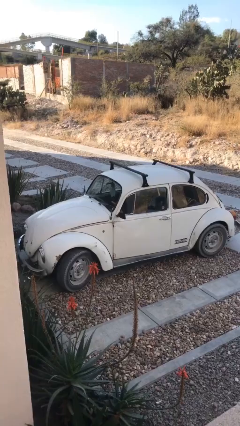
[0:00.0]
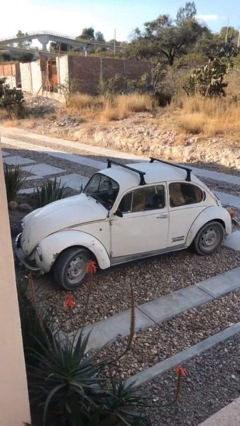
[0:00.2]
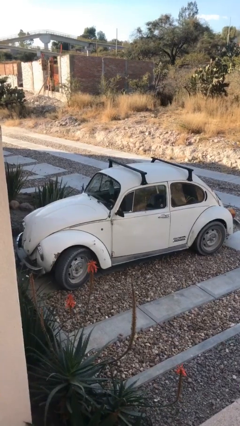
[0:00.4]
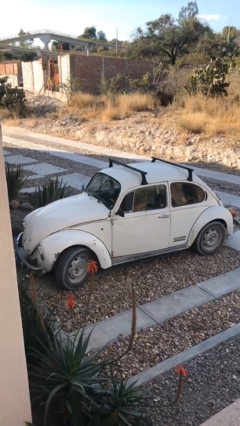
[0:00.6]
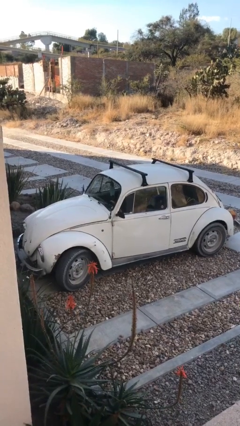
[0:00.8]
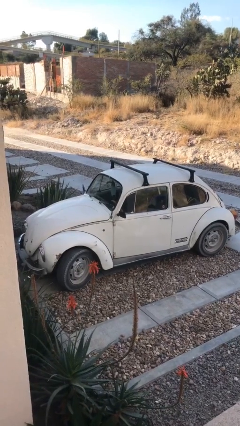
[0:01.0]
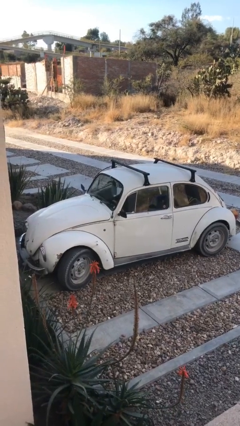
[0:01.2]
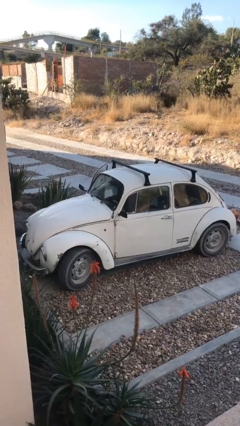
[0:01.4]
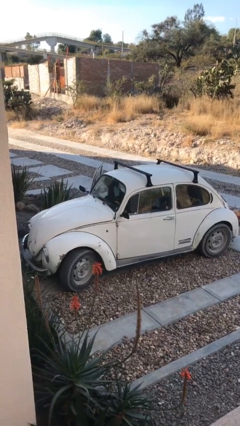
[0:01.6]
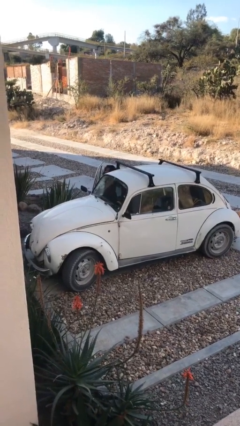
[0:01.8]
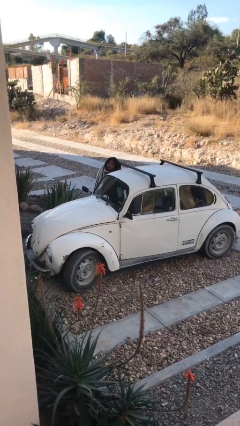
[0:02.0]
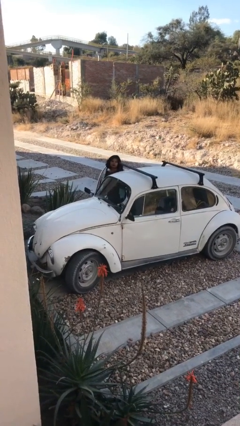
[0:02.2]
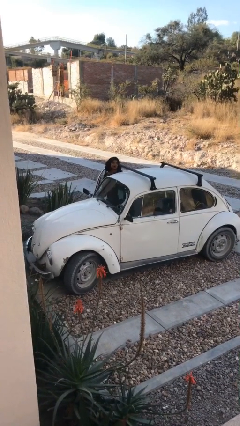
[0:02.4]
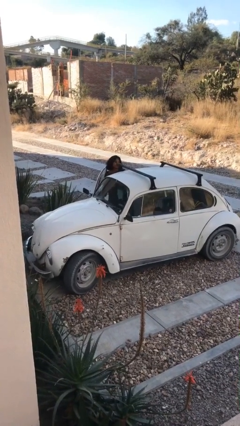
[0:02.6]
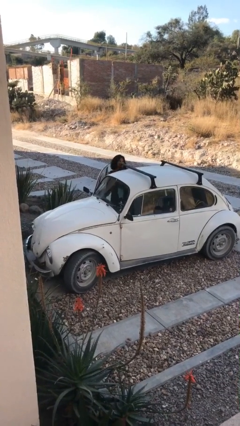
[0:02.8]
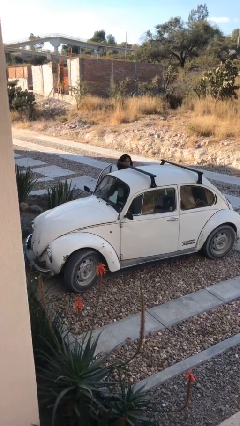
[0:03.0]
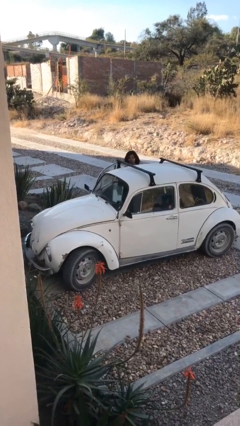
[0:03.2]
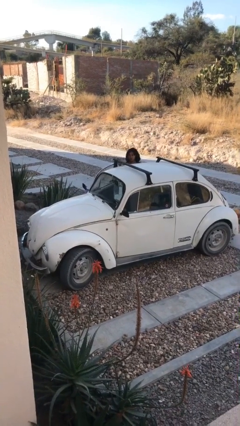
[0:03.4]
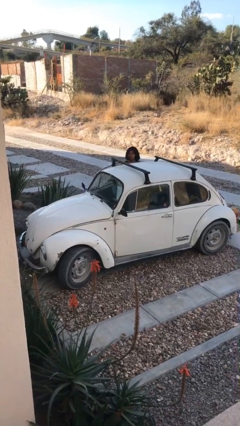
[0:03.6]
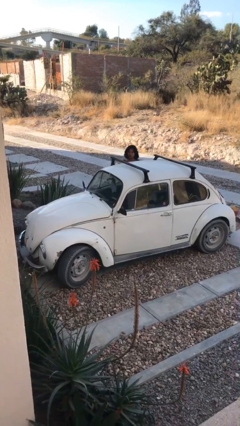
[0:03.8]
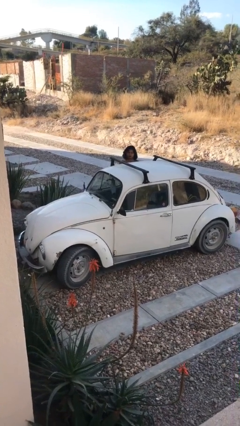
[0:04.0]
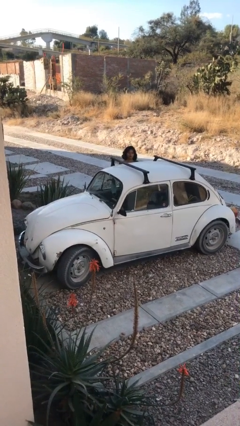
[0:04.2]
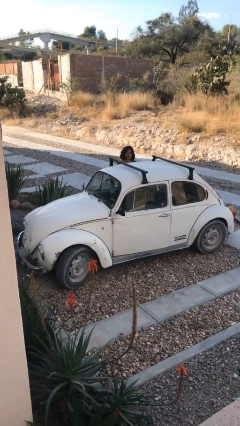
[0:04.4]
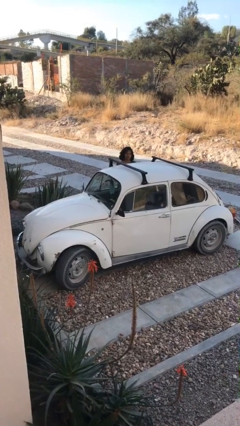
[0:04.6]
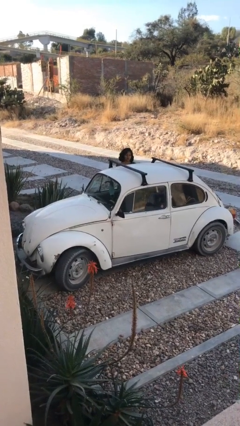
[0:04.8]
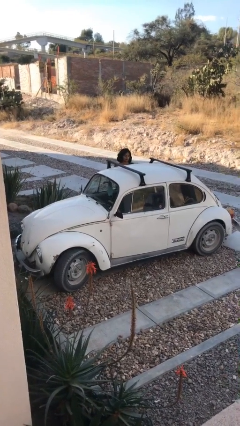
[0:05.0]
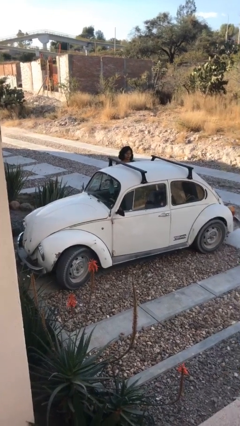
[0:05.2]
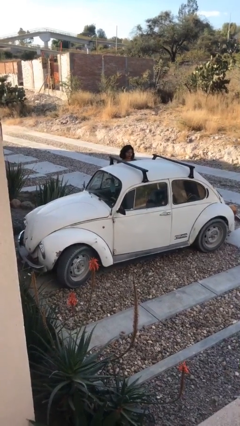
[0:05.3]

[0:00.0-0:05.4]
car drops off person

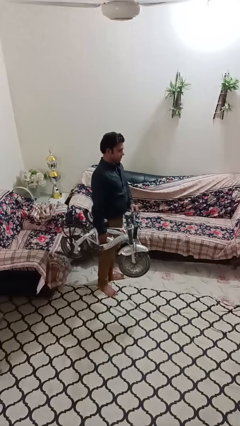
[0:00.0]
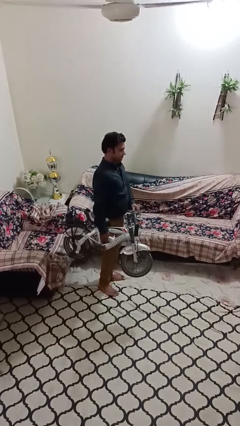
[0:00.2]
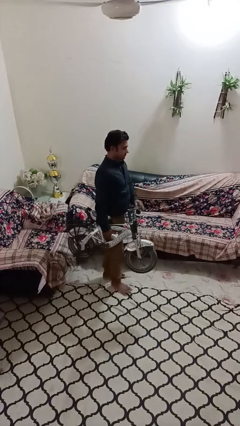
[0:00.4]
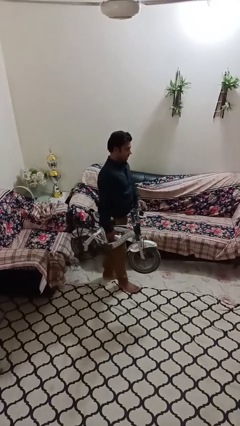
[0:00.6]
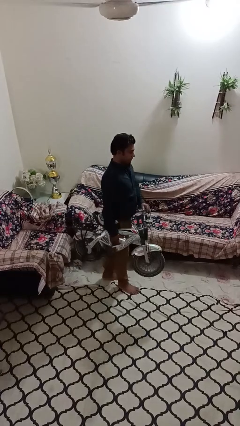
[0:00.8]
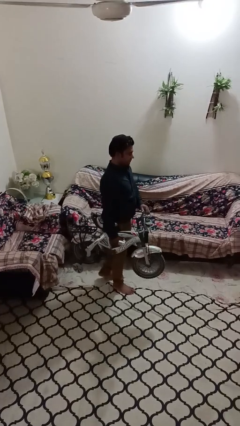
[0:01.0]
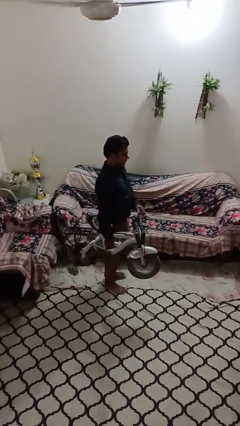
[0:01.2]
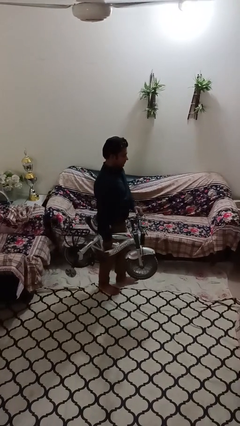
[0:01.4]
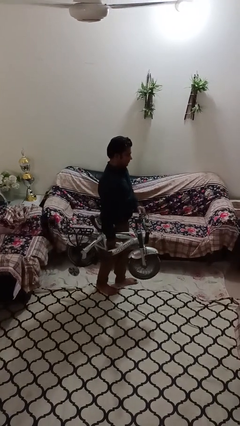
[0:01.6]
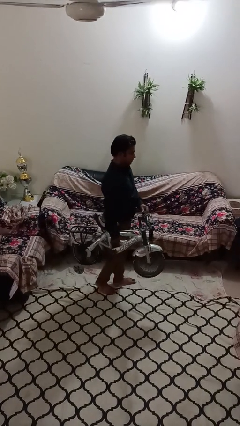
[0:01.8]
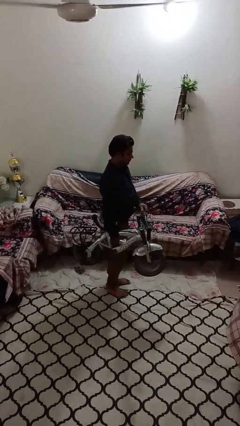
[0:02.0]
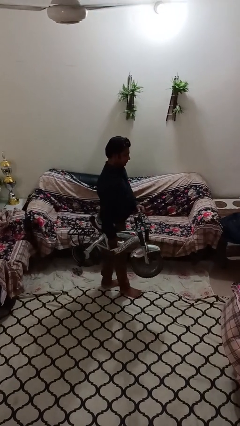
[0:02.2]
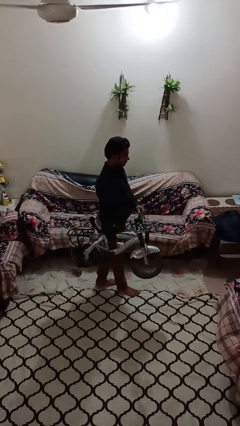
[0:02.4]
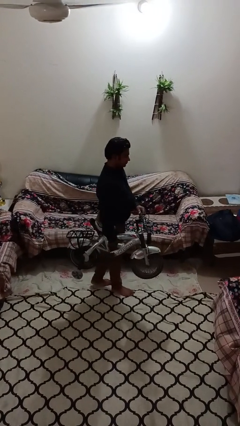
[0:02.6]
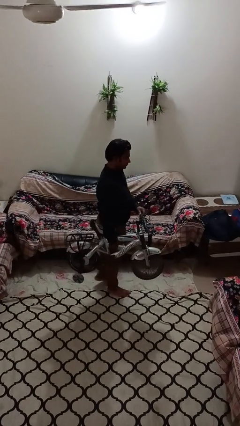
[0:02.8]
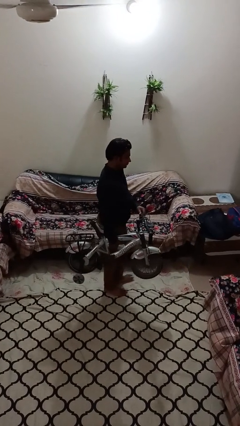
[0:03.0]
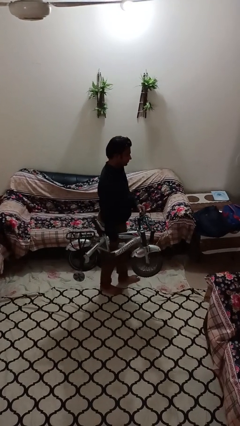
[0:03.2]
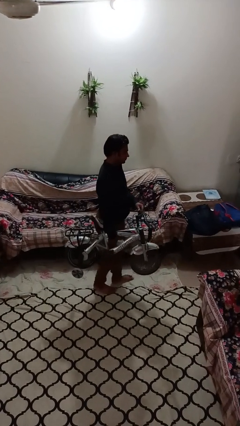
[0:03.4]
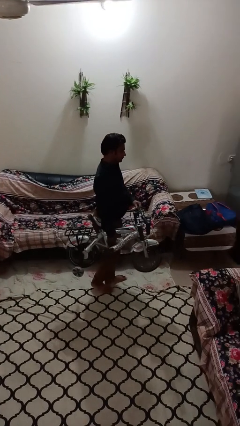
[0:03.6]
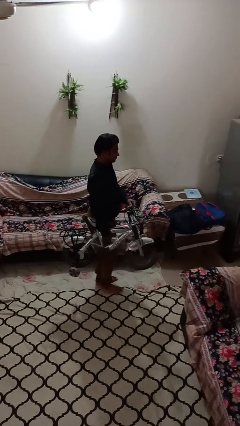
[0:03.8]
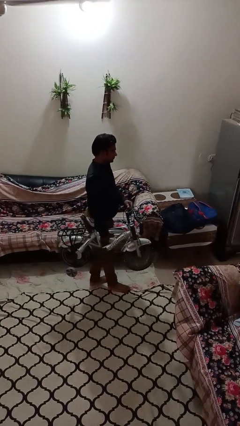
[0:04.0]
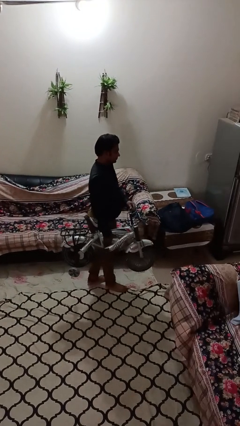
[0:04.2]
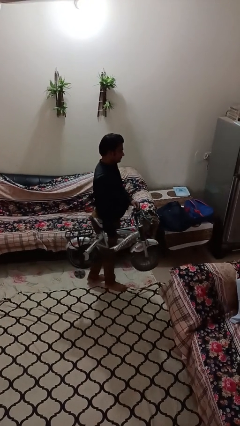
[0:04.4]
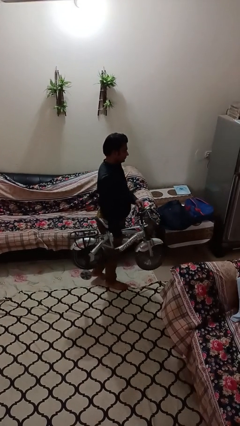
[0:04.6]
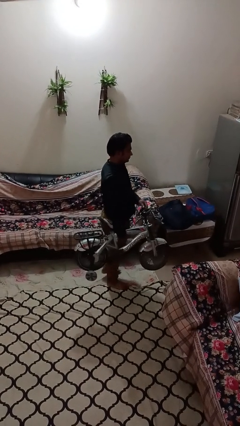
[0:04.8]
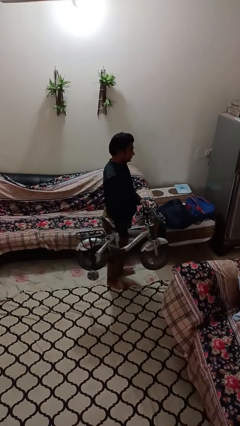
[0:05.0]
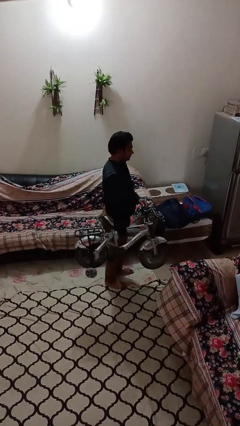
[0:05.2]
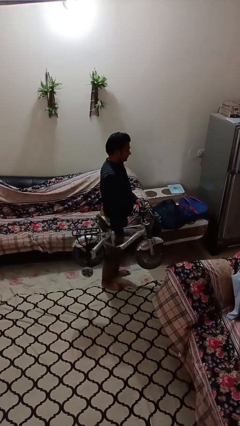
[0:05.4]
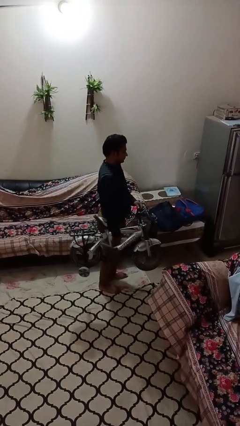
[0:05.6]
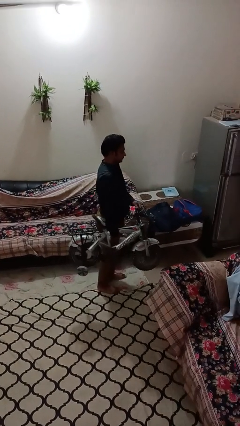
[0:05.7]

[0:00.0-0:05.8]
person carries bicycle

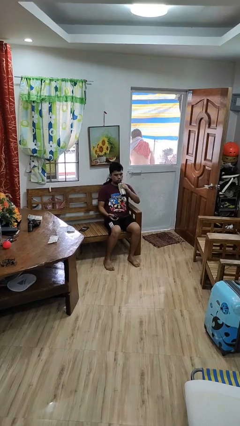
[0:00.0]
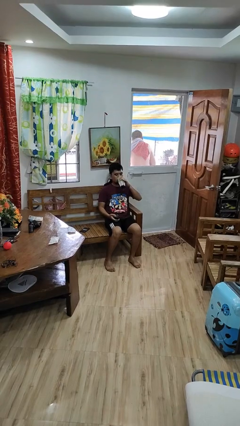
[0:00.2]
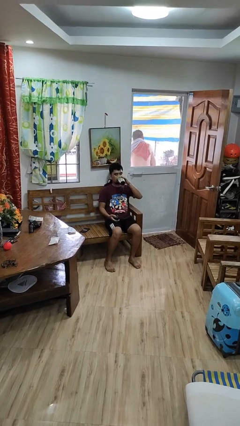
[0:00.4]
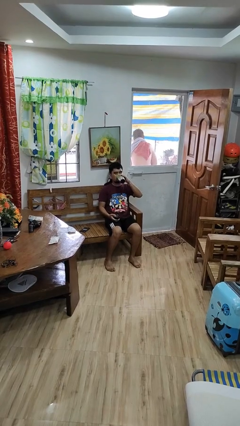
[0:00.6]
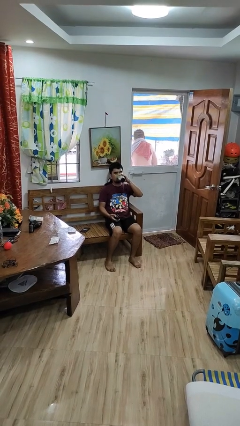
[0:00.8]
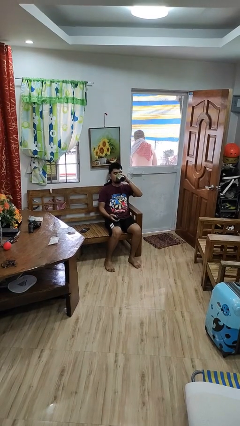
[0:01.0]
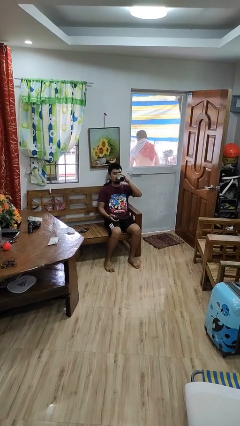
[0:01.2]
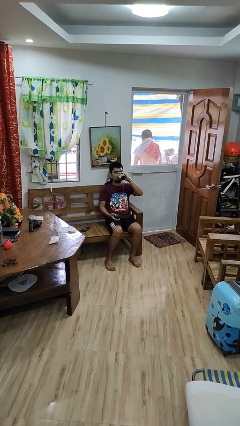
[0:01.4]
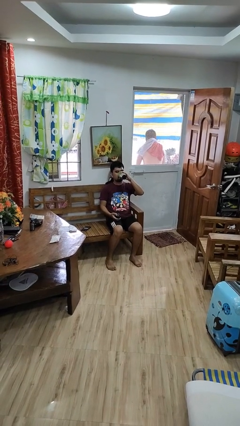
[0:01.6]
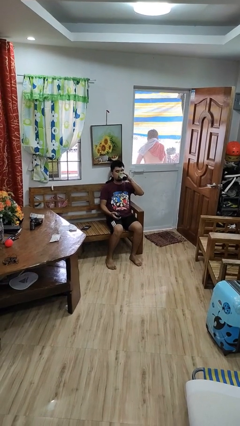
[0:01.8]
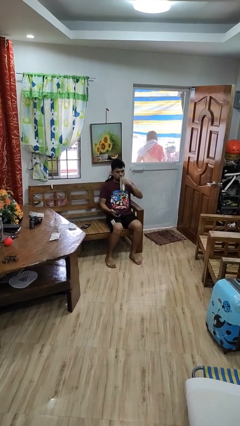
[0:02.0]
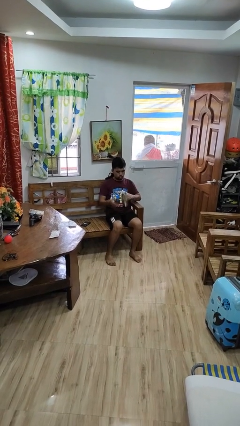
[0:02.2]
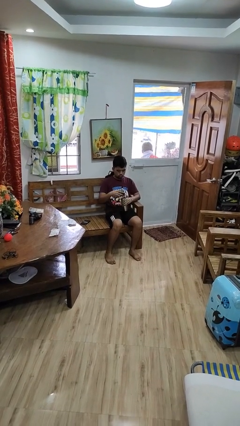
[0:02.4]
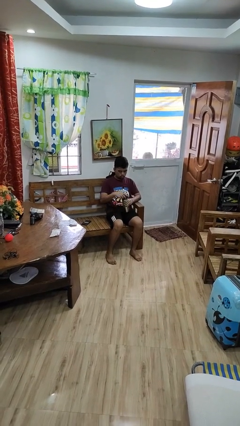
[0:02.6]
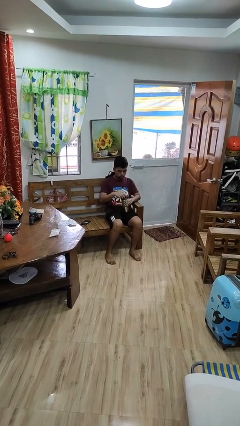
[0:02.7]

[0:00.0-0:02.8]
person drinks from bottle

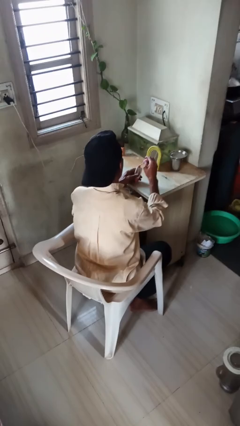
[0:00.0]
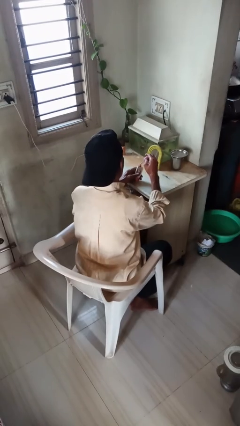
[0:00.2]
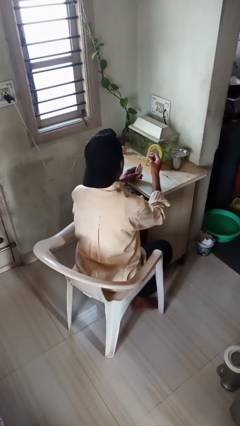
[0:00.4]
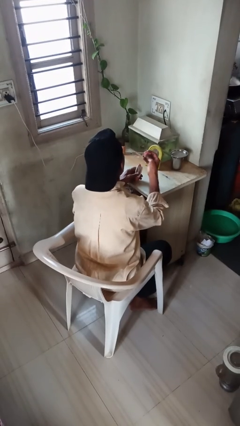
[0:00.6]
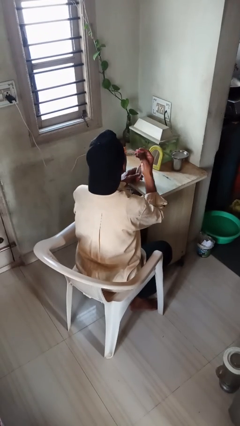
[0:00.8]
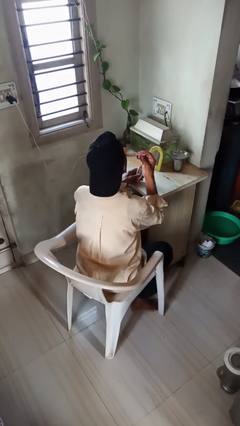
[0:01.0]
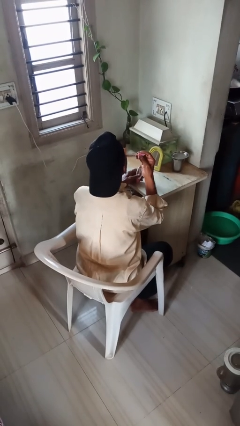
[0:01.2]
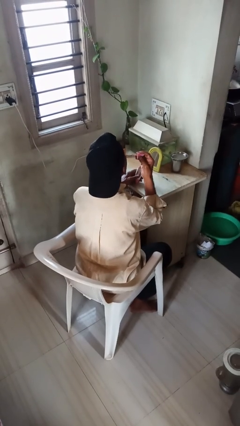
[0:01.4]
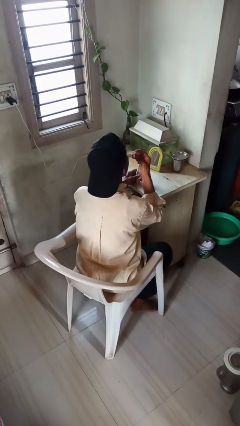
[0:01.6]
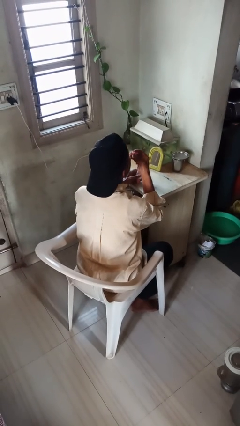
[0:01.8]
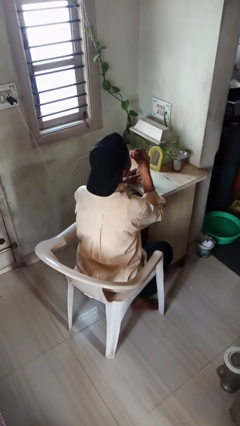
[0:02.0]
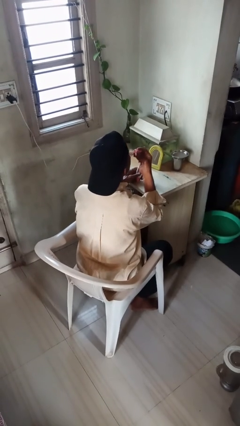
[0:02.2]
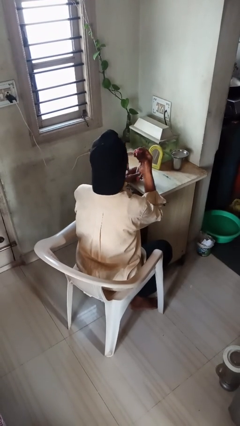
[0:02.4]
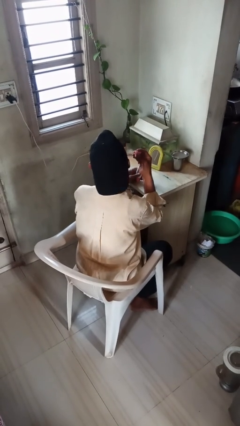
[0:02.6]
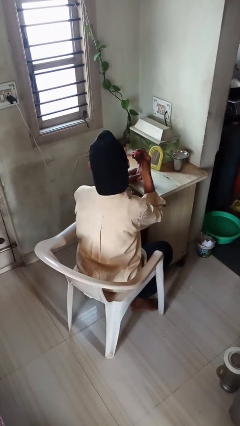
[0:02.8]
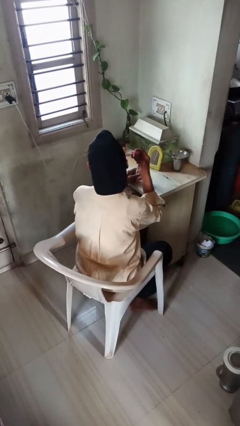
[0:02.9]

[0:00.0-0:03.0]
person applies lip makeup

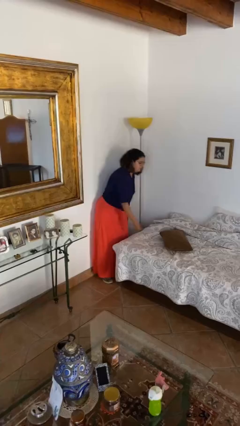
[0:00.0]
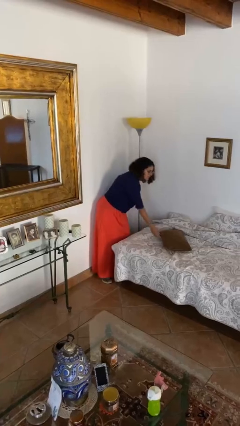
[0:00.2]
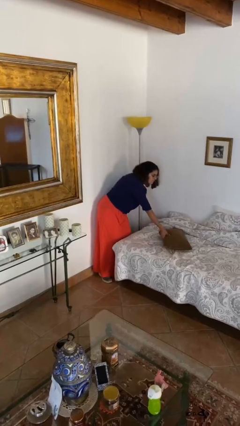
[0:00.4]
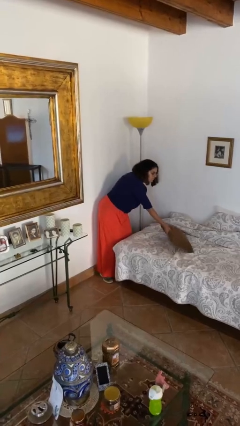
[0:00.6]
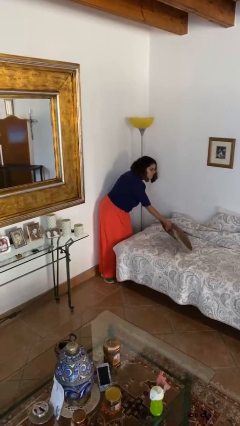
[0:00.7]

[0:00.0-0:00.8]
person picks up object from bed

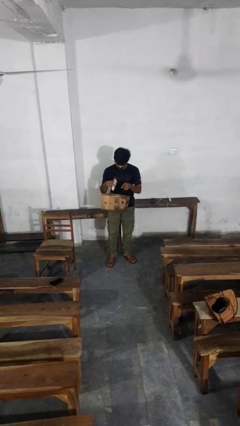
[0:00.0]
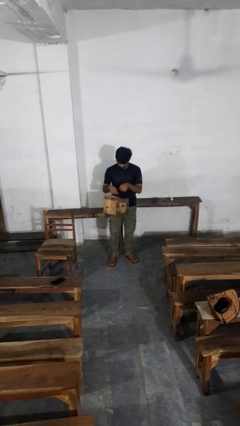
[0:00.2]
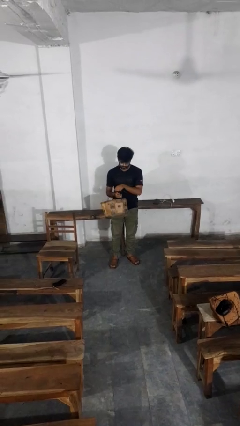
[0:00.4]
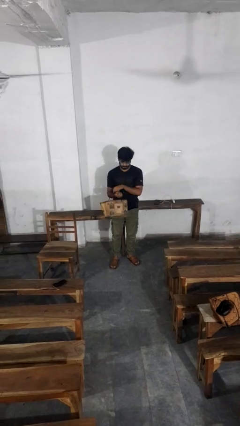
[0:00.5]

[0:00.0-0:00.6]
person puts object into purse
